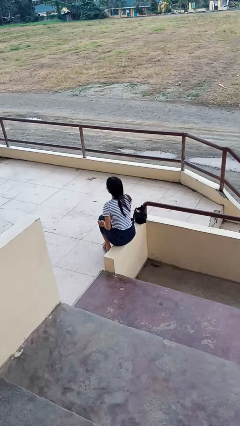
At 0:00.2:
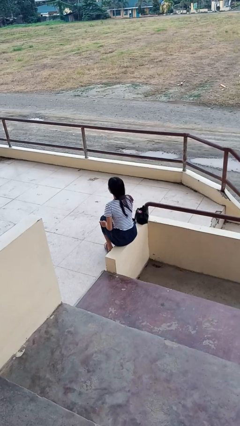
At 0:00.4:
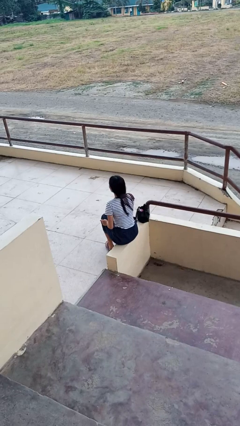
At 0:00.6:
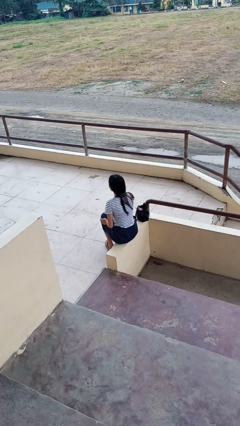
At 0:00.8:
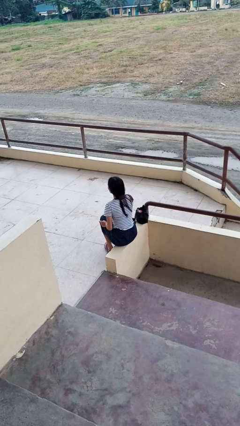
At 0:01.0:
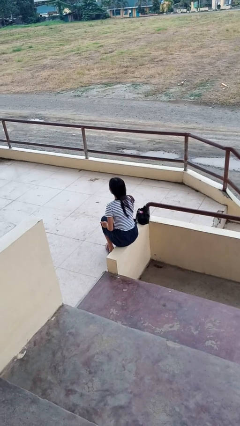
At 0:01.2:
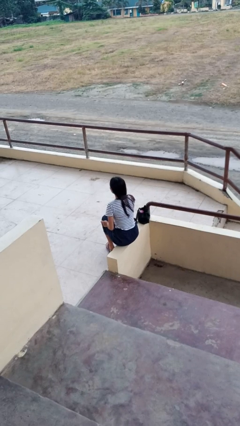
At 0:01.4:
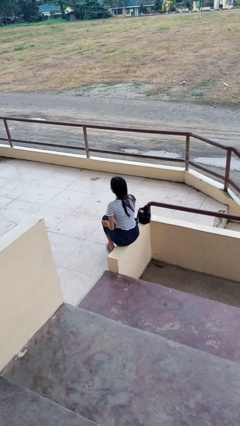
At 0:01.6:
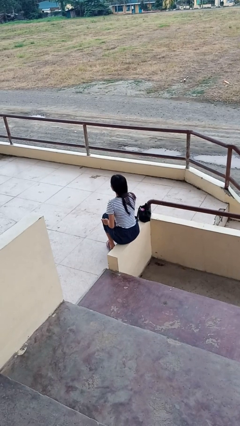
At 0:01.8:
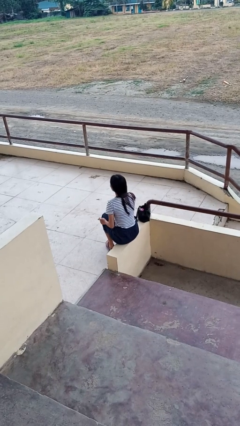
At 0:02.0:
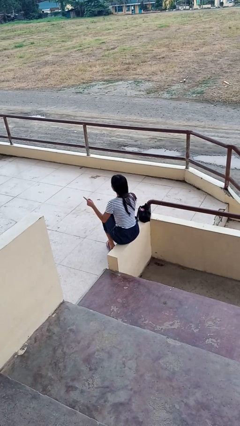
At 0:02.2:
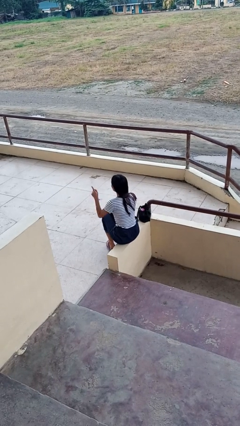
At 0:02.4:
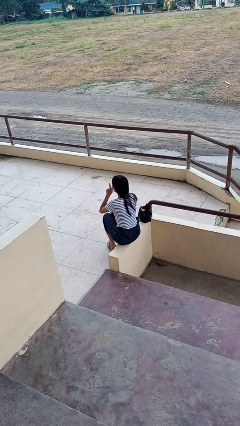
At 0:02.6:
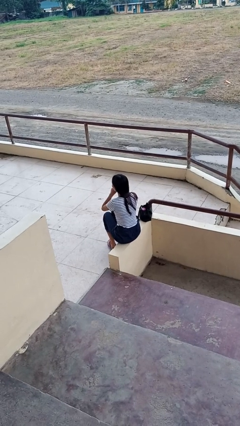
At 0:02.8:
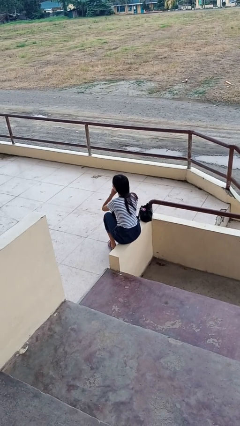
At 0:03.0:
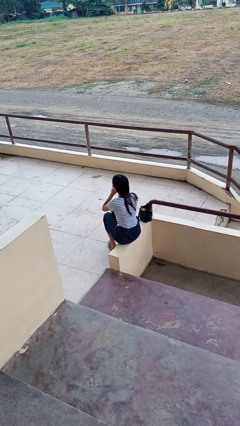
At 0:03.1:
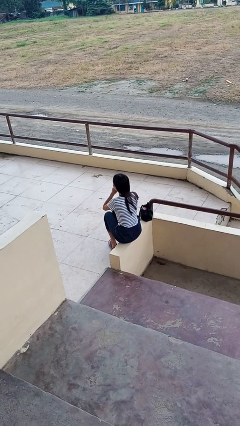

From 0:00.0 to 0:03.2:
person gestures be quiet

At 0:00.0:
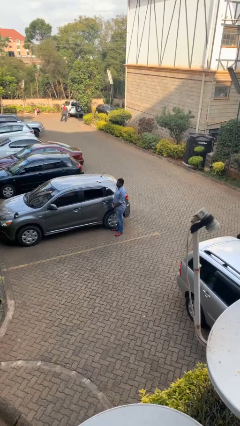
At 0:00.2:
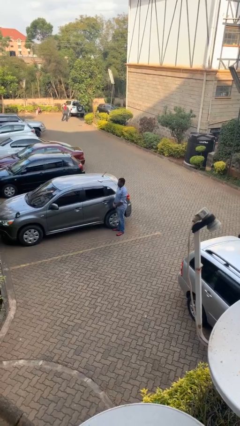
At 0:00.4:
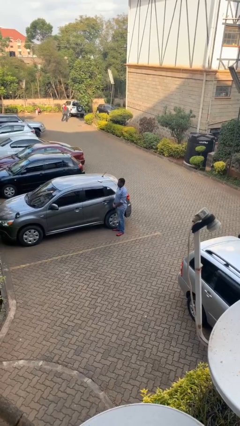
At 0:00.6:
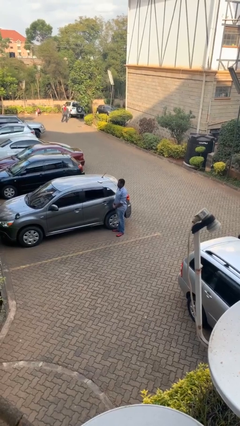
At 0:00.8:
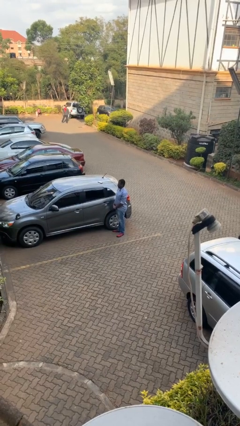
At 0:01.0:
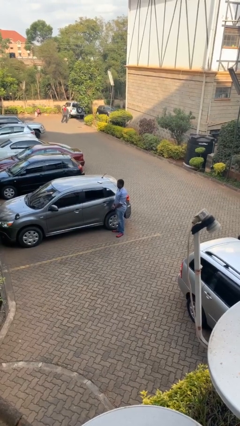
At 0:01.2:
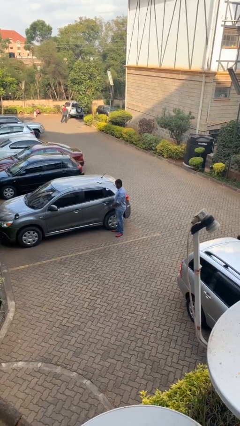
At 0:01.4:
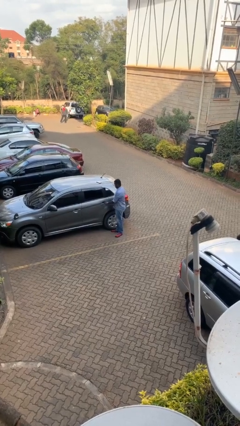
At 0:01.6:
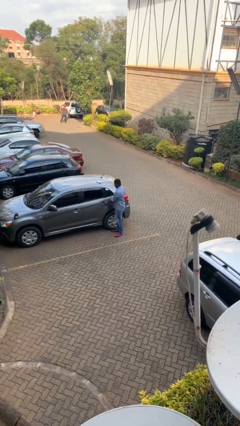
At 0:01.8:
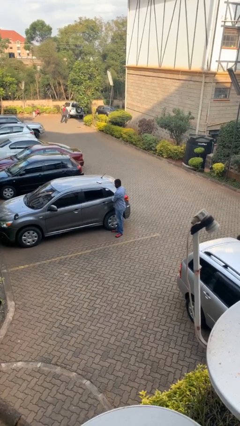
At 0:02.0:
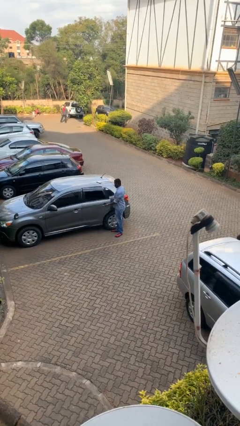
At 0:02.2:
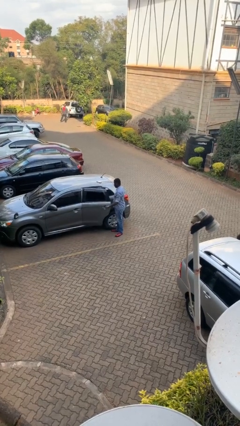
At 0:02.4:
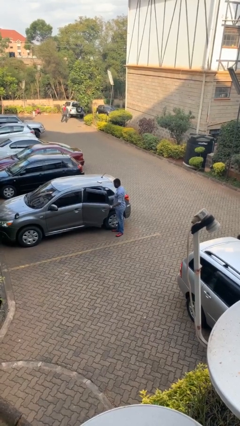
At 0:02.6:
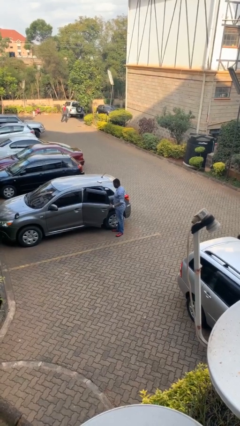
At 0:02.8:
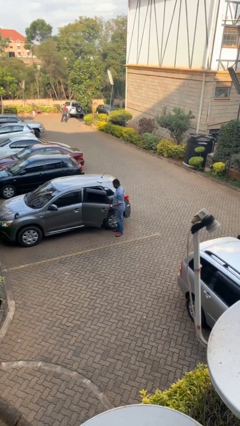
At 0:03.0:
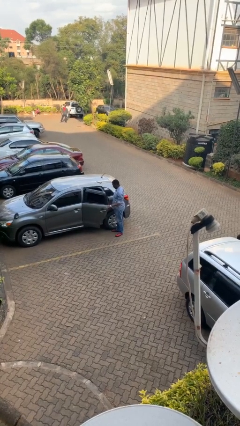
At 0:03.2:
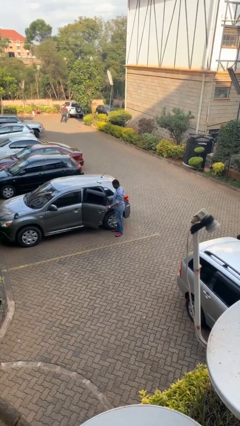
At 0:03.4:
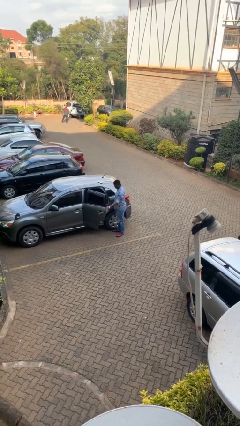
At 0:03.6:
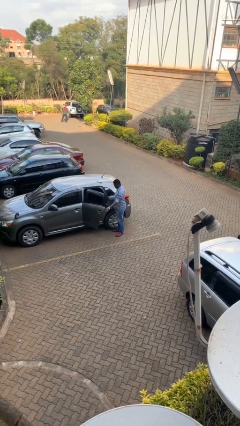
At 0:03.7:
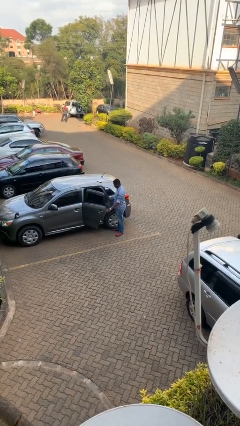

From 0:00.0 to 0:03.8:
person opens car door

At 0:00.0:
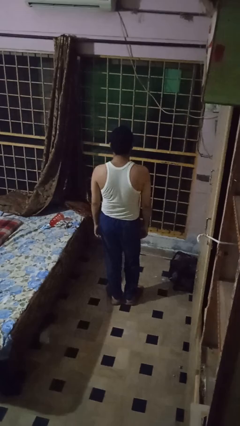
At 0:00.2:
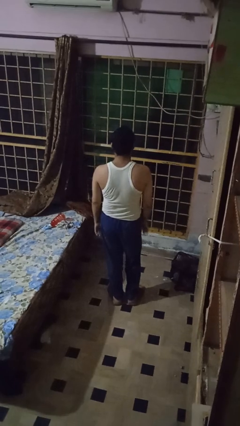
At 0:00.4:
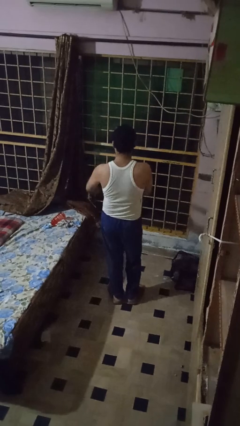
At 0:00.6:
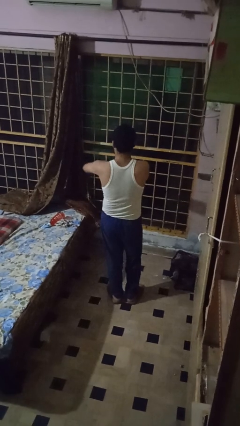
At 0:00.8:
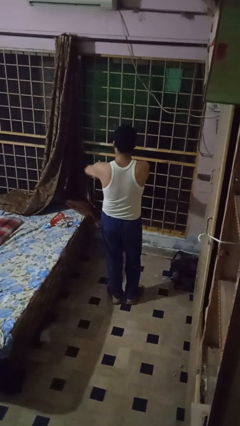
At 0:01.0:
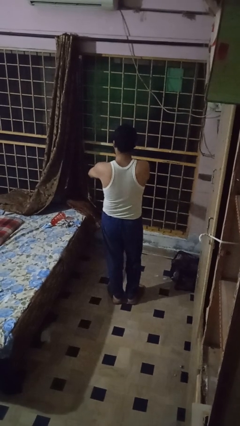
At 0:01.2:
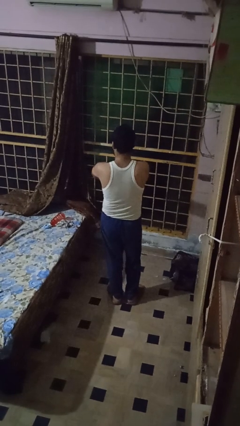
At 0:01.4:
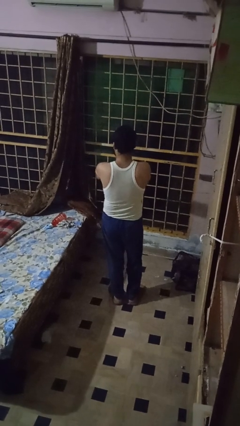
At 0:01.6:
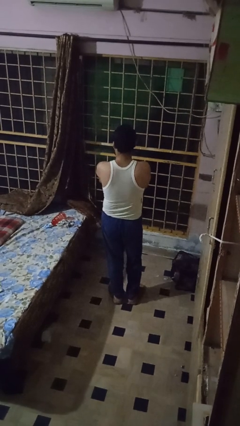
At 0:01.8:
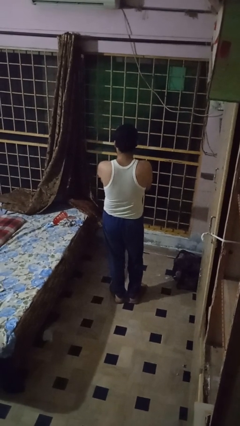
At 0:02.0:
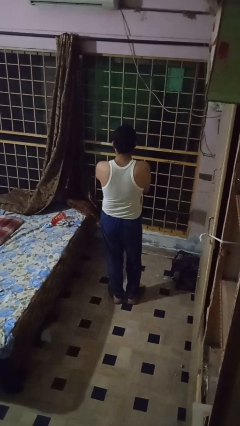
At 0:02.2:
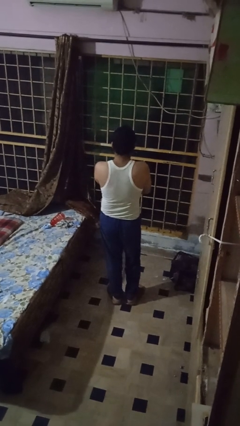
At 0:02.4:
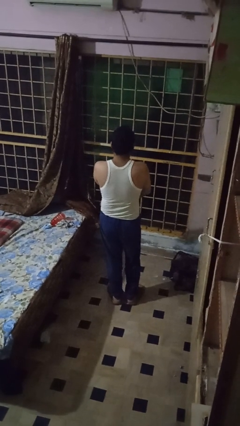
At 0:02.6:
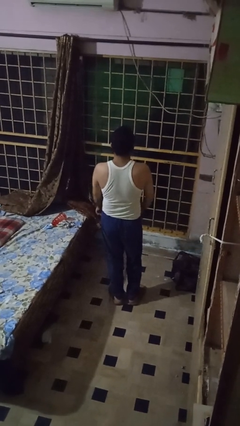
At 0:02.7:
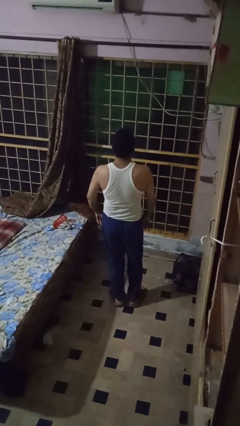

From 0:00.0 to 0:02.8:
person swats bug

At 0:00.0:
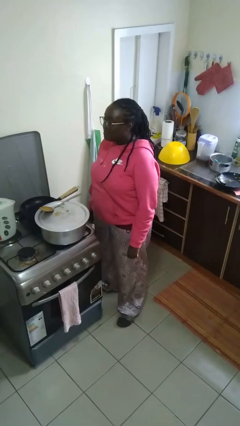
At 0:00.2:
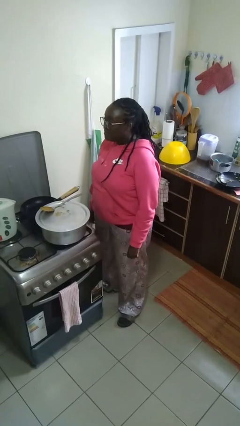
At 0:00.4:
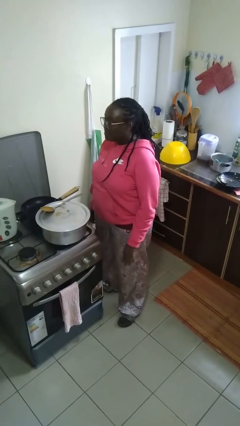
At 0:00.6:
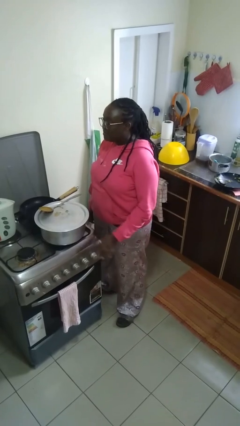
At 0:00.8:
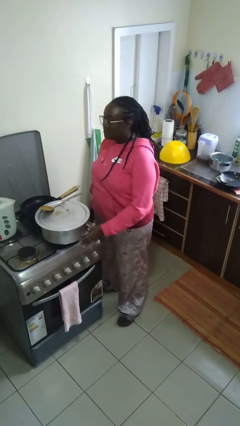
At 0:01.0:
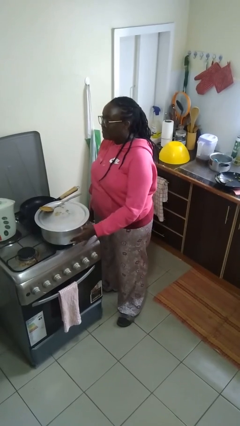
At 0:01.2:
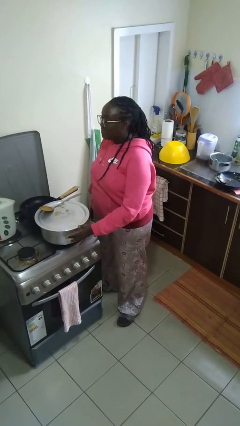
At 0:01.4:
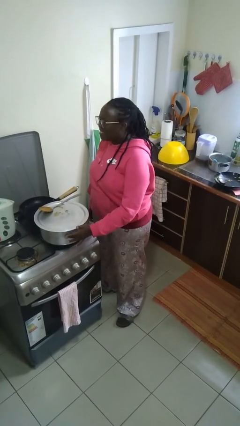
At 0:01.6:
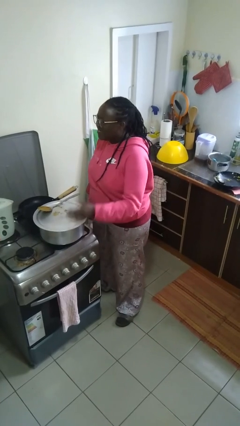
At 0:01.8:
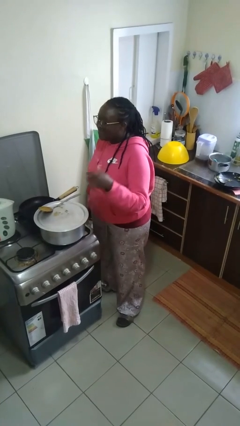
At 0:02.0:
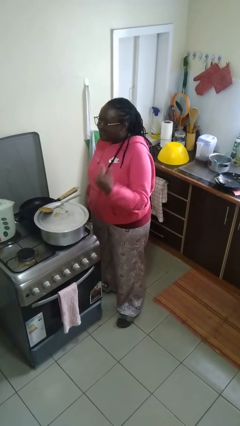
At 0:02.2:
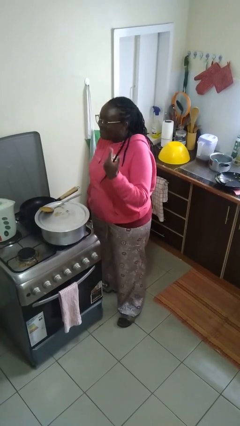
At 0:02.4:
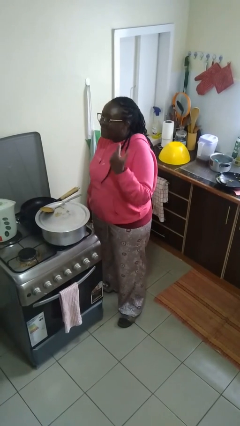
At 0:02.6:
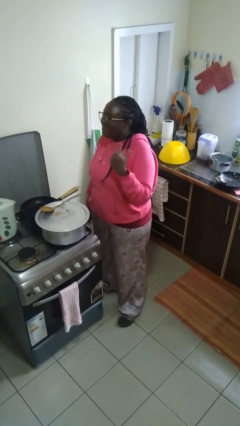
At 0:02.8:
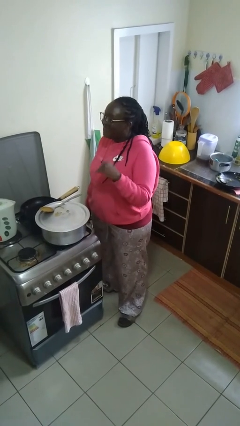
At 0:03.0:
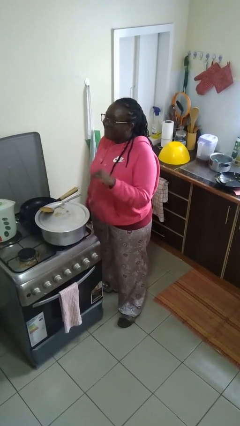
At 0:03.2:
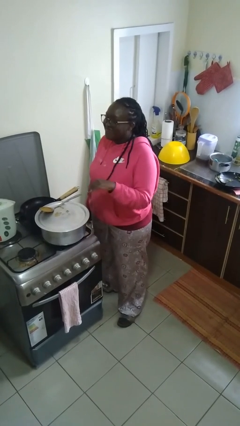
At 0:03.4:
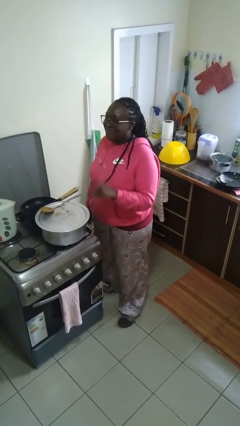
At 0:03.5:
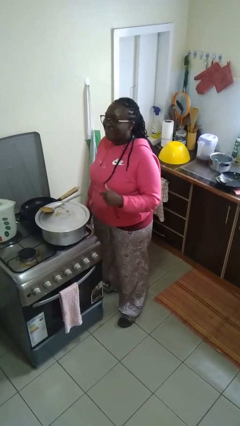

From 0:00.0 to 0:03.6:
person burns hand

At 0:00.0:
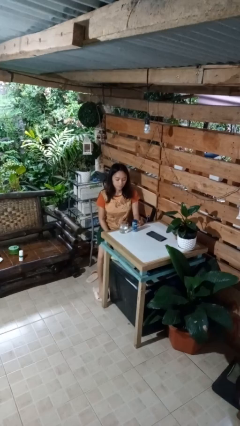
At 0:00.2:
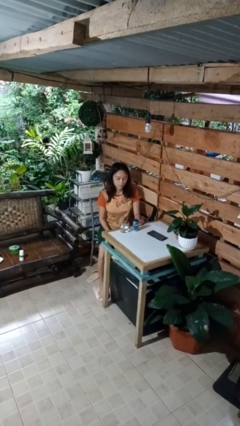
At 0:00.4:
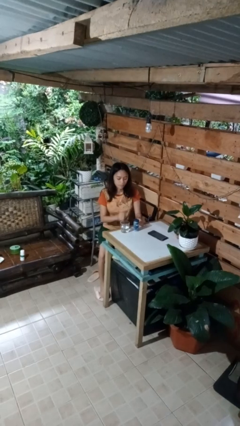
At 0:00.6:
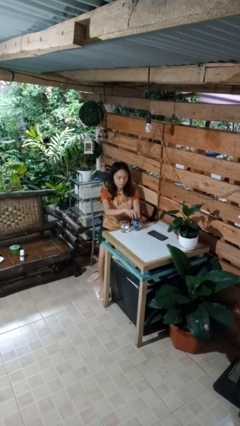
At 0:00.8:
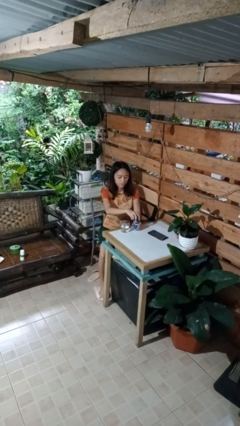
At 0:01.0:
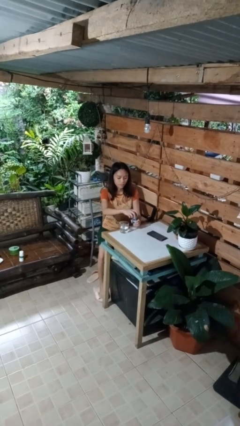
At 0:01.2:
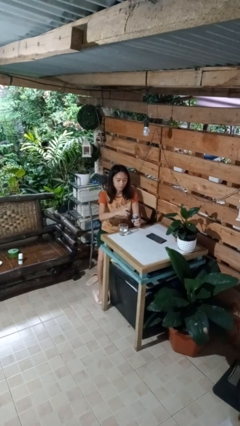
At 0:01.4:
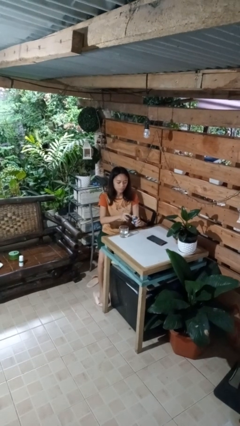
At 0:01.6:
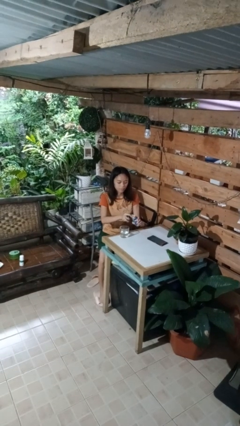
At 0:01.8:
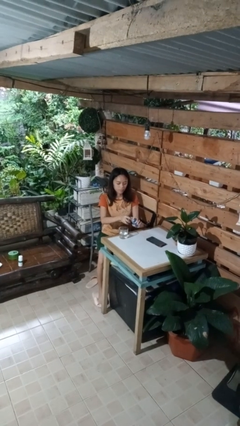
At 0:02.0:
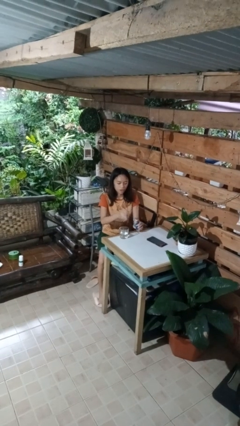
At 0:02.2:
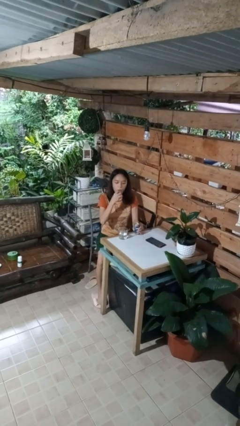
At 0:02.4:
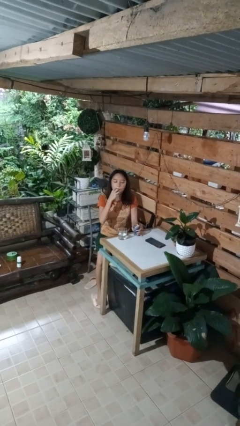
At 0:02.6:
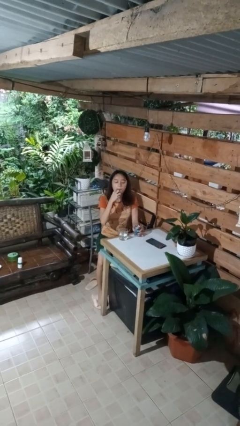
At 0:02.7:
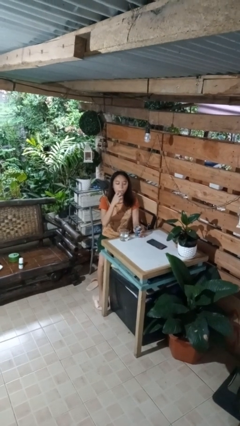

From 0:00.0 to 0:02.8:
person takes medicine pills

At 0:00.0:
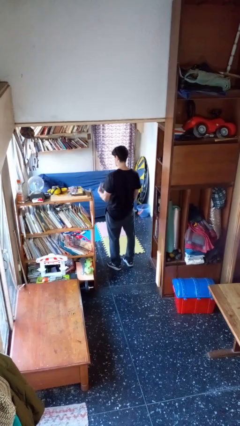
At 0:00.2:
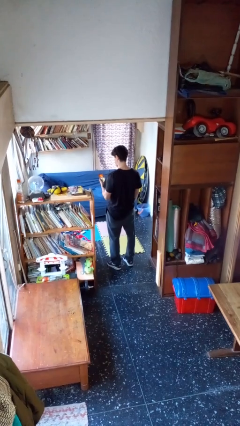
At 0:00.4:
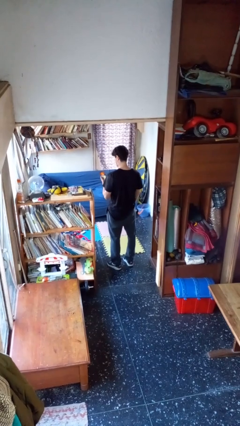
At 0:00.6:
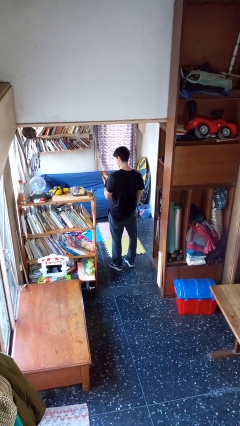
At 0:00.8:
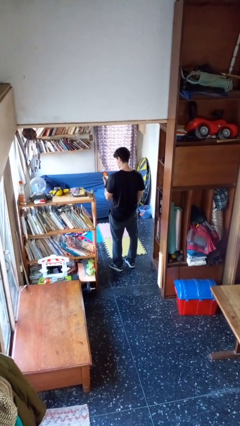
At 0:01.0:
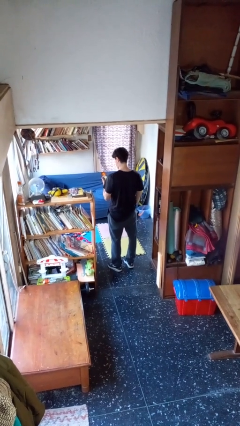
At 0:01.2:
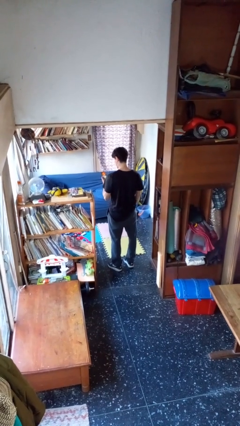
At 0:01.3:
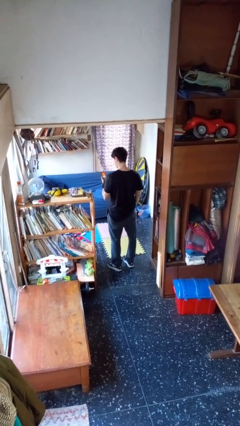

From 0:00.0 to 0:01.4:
person takes phone from pocket
